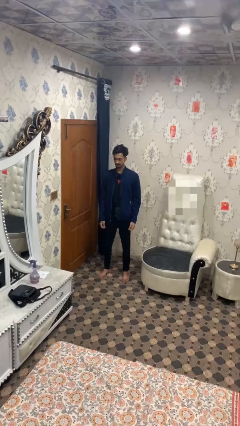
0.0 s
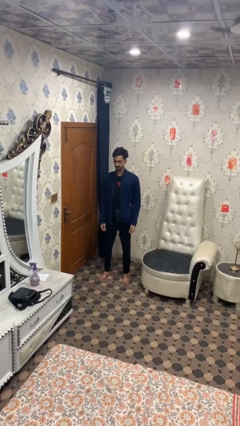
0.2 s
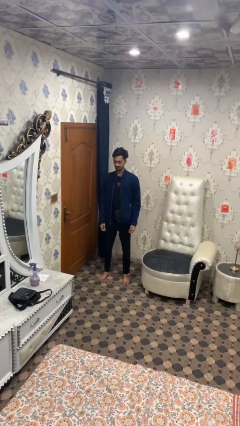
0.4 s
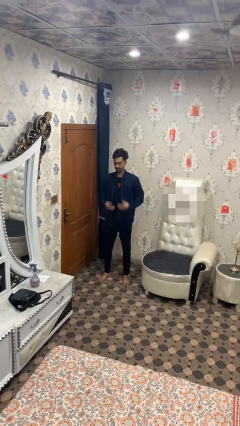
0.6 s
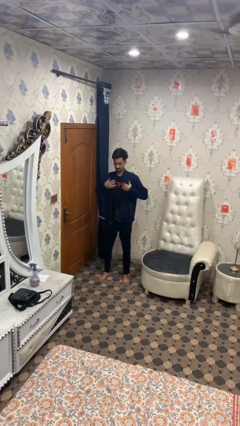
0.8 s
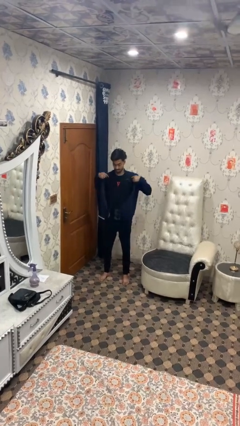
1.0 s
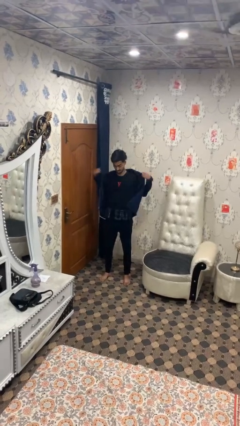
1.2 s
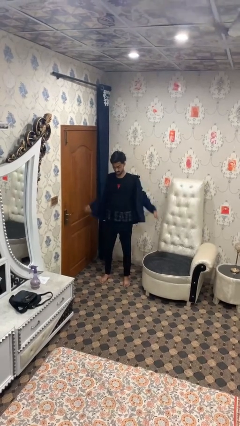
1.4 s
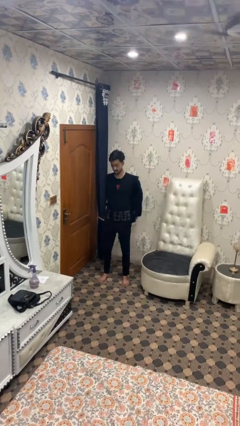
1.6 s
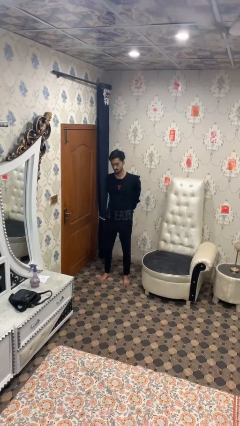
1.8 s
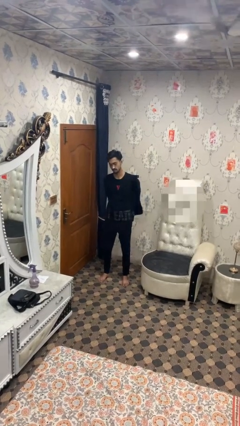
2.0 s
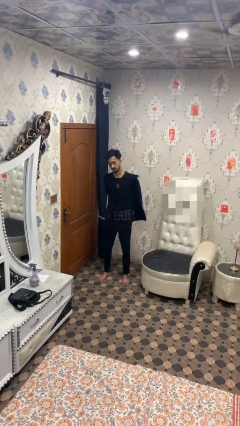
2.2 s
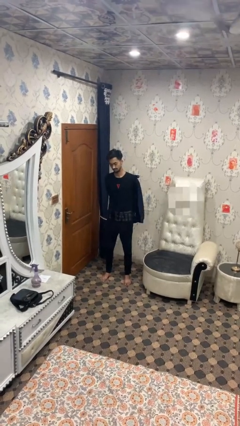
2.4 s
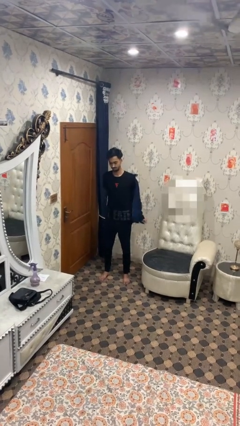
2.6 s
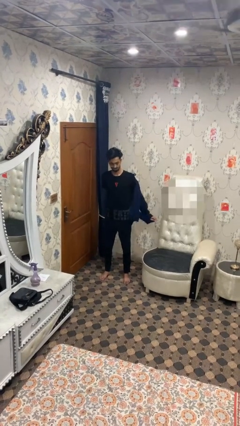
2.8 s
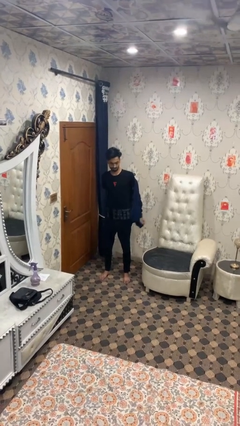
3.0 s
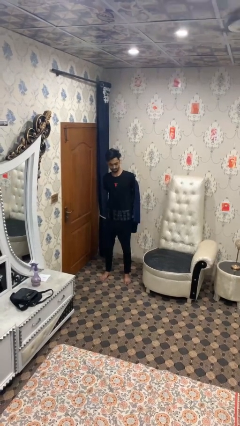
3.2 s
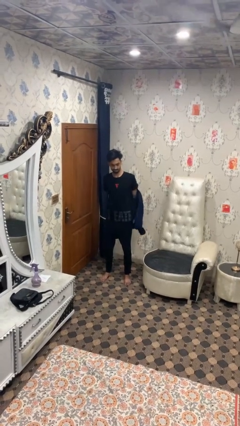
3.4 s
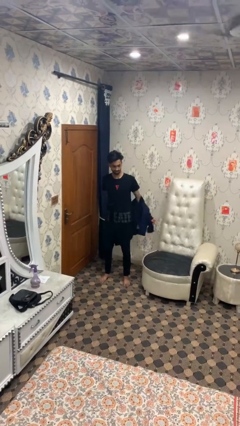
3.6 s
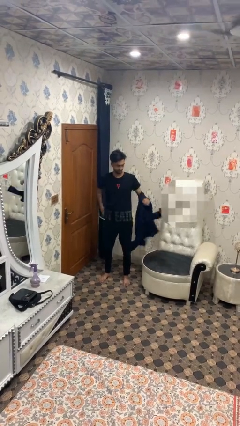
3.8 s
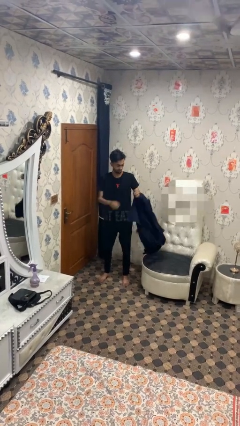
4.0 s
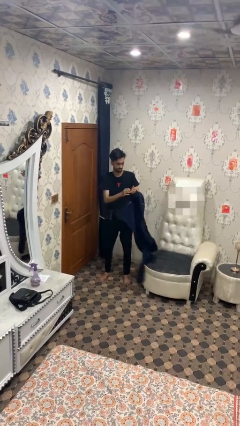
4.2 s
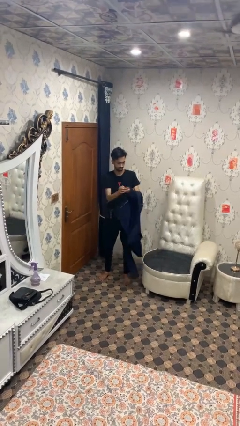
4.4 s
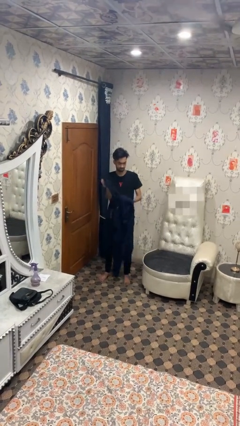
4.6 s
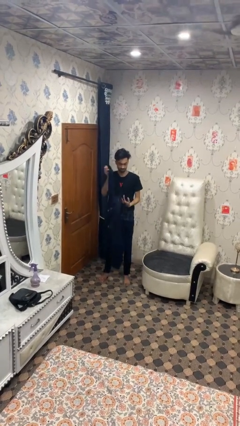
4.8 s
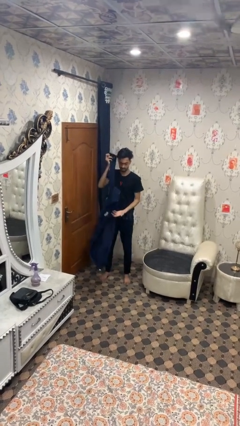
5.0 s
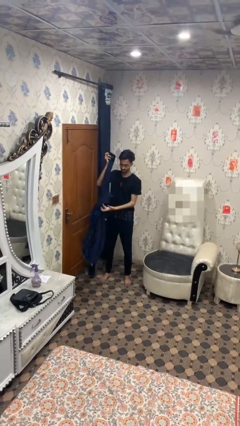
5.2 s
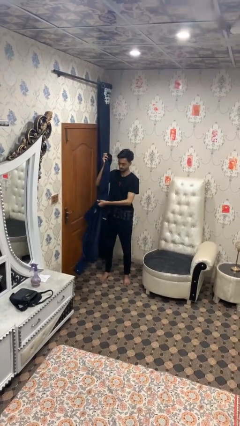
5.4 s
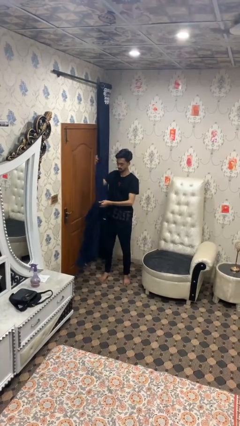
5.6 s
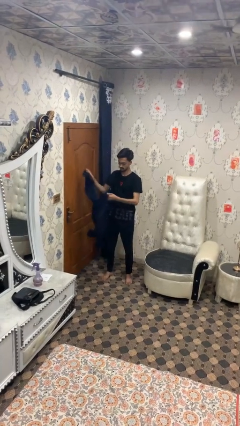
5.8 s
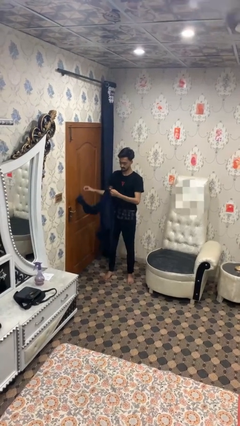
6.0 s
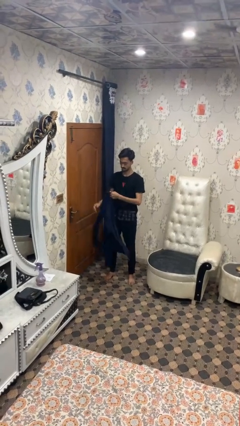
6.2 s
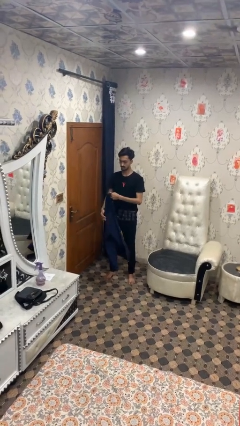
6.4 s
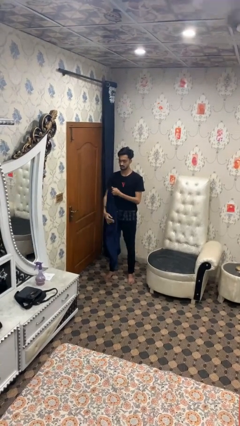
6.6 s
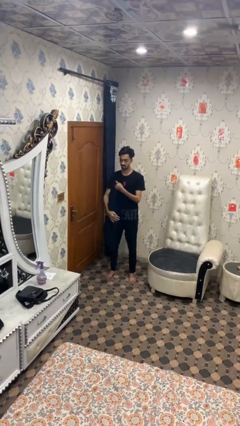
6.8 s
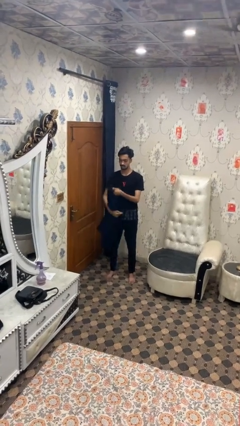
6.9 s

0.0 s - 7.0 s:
person takes off jacket

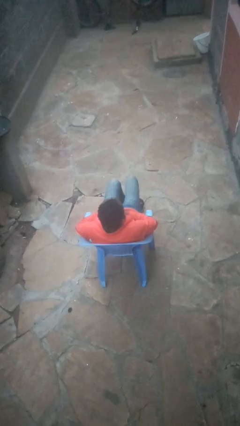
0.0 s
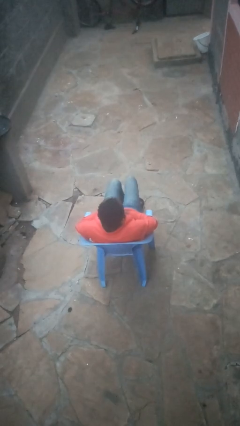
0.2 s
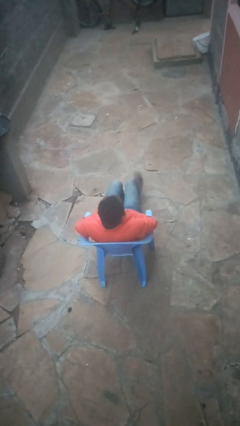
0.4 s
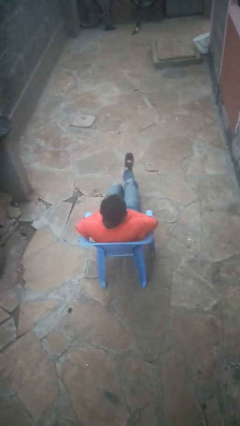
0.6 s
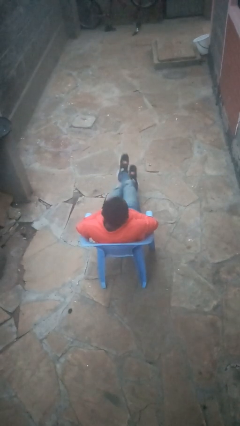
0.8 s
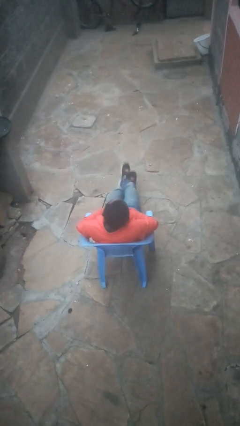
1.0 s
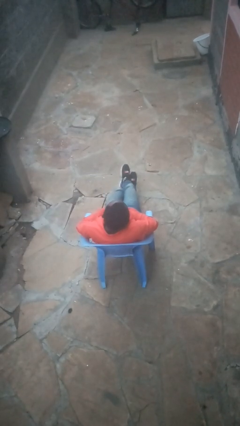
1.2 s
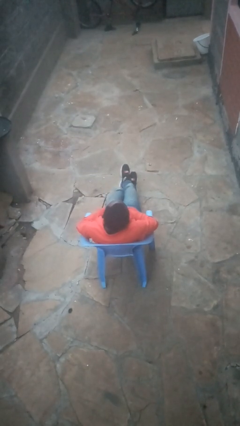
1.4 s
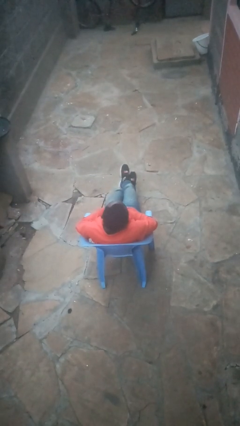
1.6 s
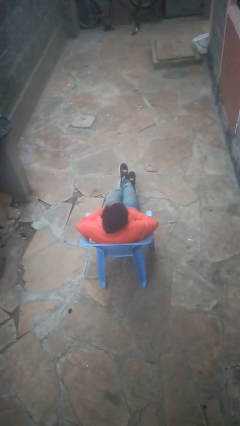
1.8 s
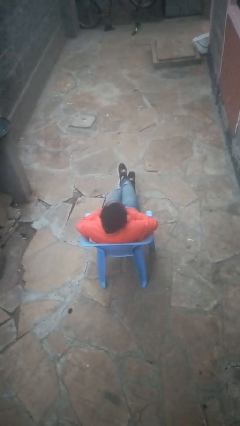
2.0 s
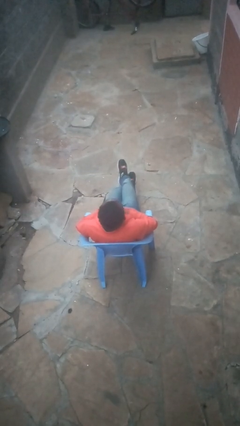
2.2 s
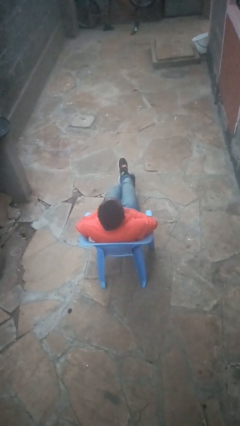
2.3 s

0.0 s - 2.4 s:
person crosses legs

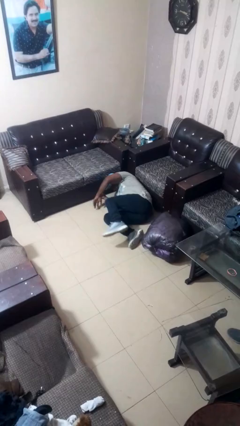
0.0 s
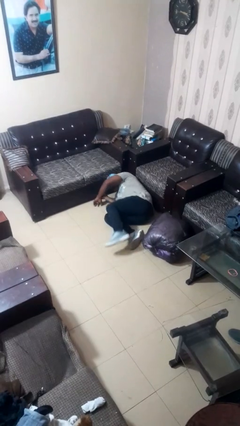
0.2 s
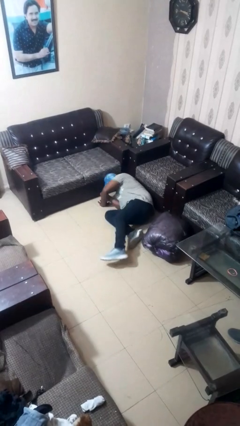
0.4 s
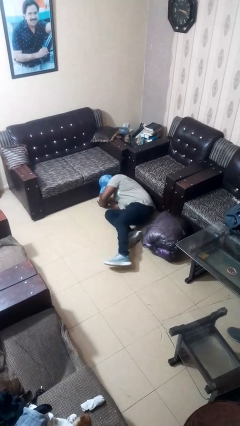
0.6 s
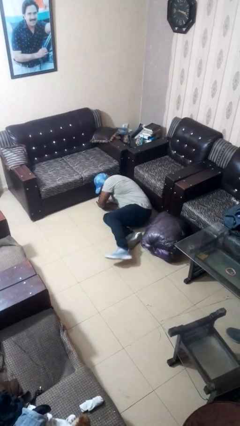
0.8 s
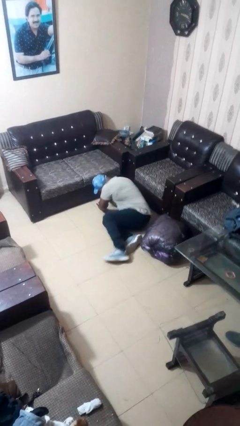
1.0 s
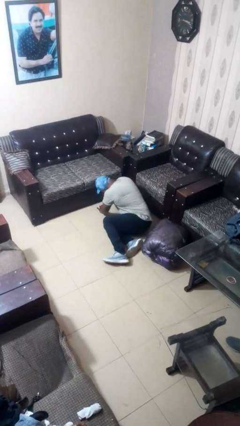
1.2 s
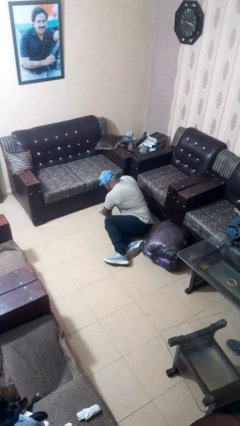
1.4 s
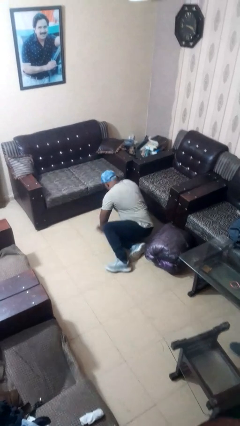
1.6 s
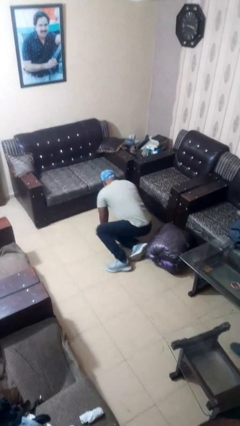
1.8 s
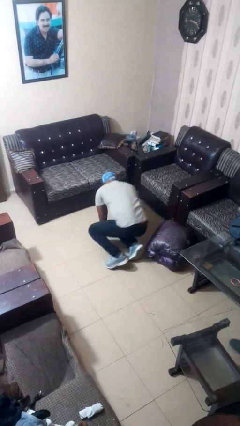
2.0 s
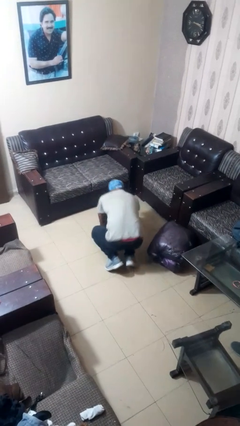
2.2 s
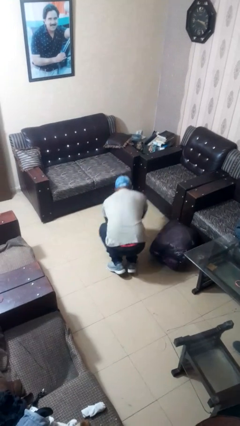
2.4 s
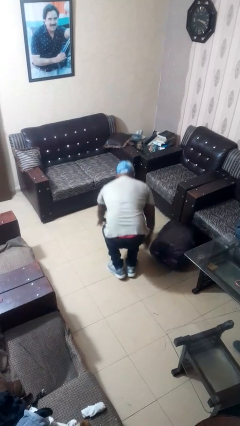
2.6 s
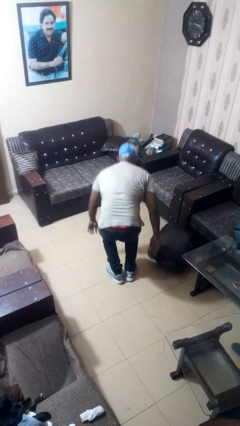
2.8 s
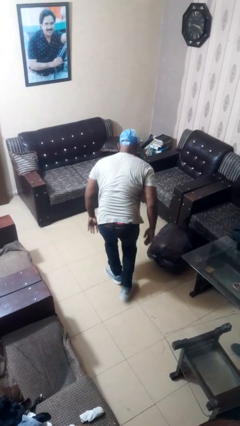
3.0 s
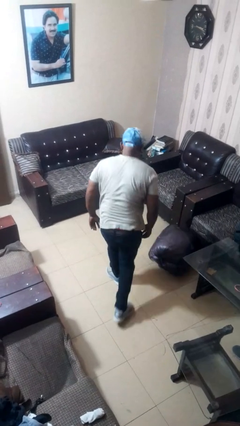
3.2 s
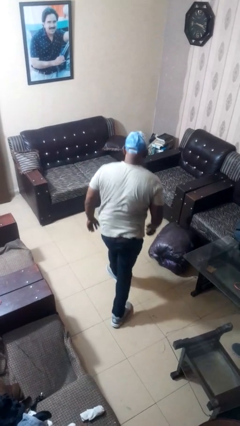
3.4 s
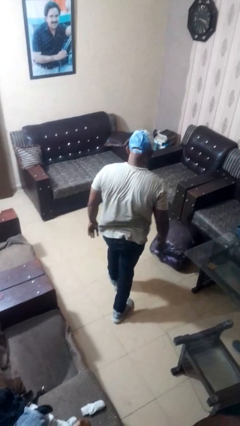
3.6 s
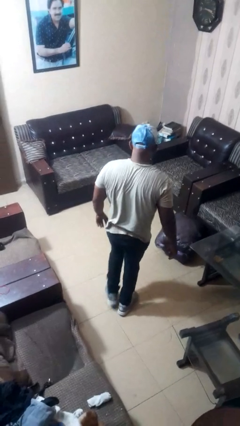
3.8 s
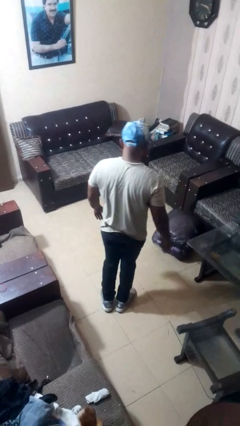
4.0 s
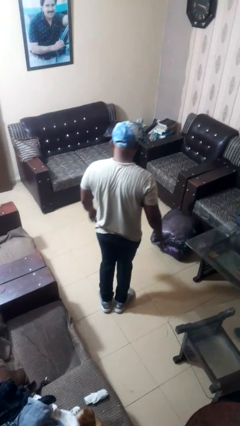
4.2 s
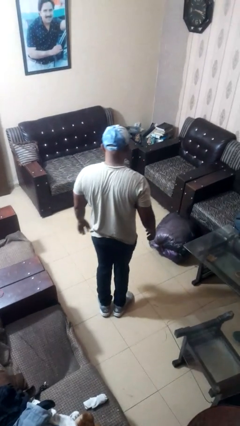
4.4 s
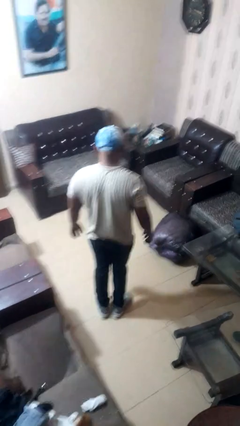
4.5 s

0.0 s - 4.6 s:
person stands up from floor

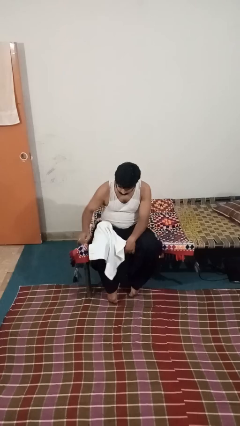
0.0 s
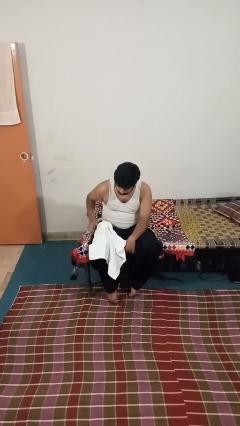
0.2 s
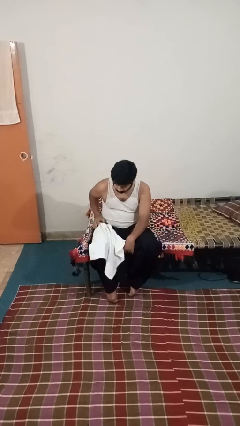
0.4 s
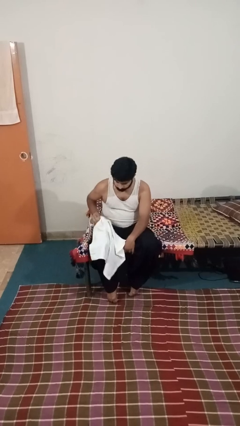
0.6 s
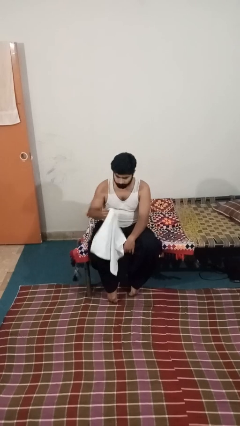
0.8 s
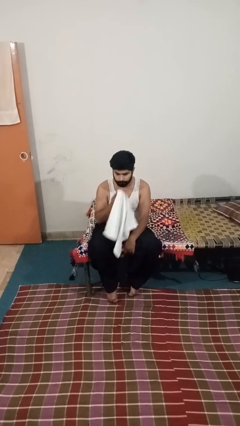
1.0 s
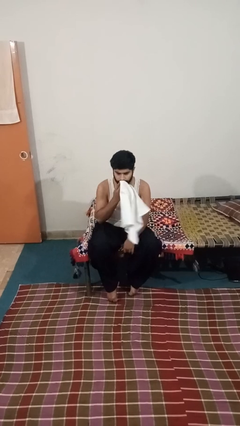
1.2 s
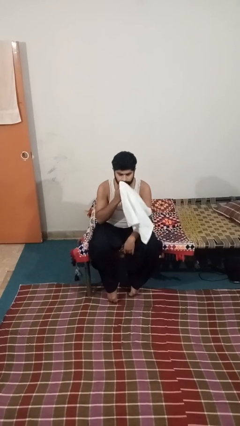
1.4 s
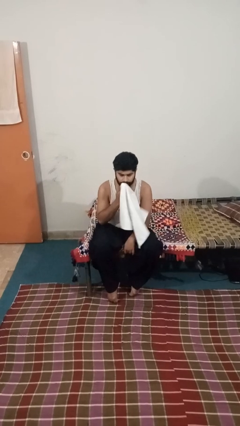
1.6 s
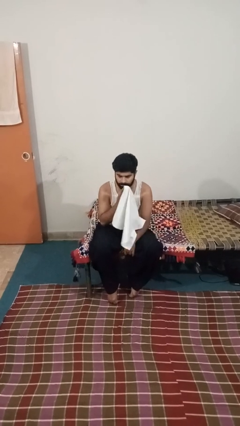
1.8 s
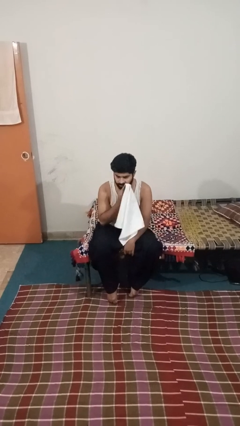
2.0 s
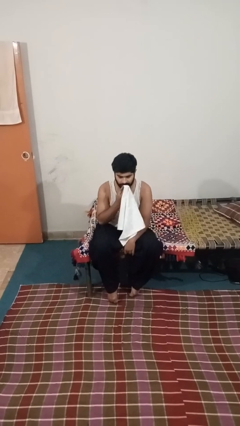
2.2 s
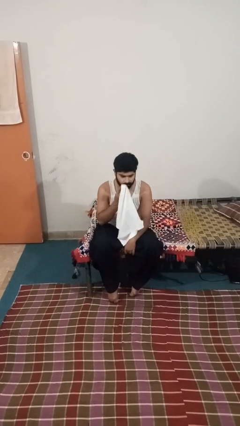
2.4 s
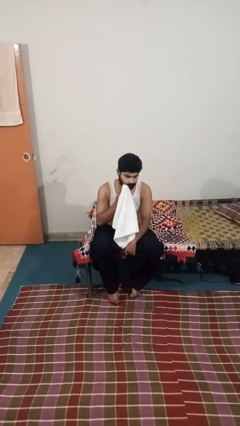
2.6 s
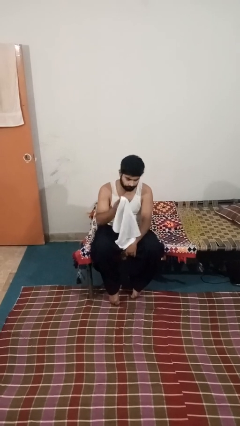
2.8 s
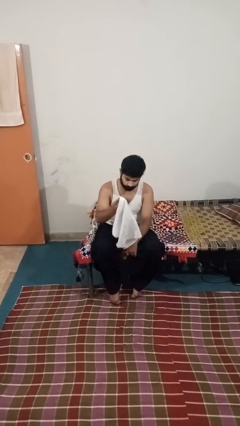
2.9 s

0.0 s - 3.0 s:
person wipes mouth with napkin

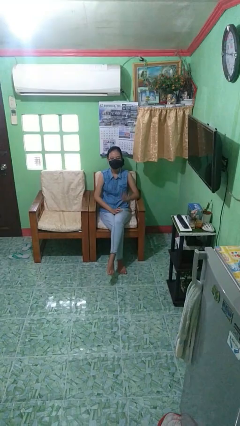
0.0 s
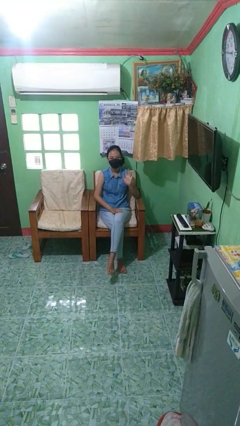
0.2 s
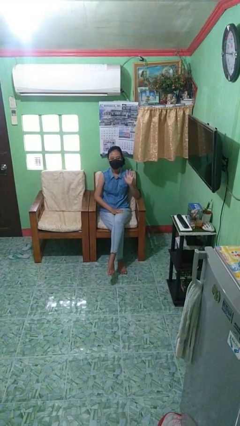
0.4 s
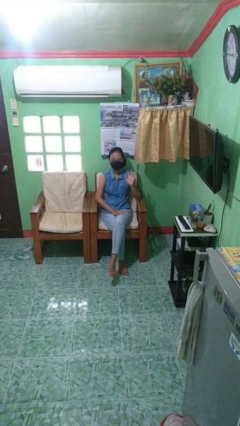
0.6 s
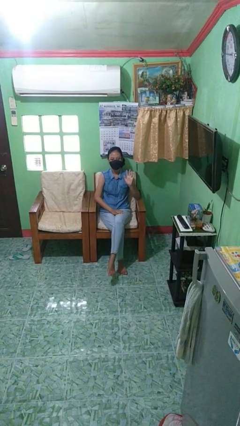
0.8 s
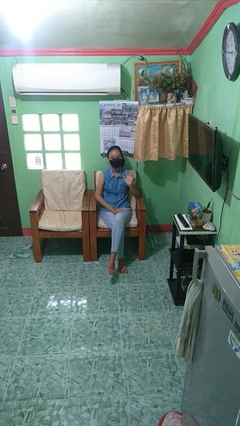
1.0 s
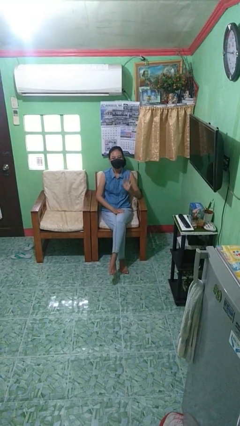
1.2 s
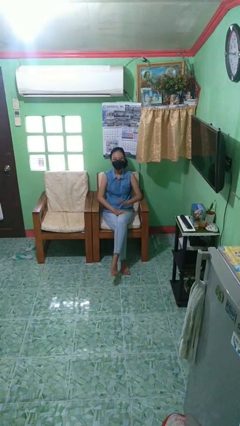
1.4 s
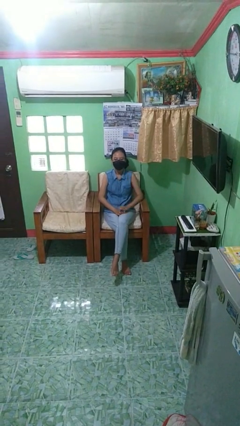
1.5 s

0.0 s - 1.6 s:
person gestures number five
